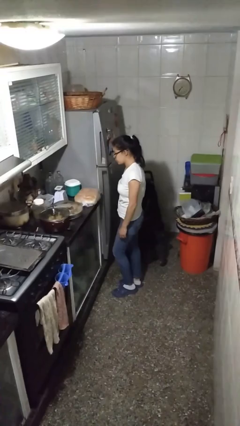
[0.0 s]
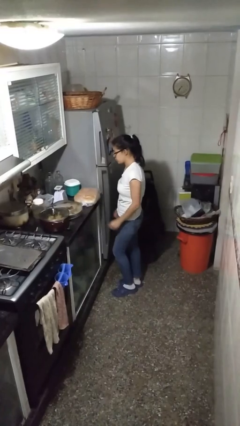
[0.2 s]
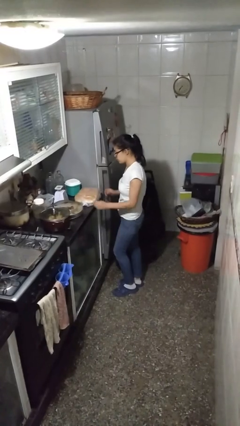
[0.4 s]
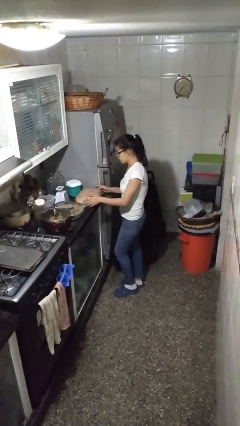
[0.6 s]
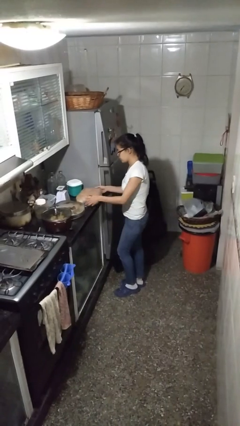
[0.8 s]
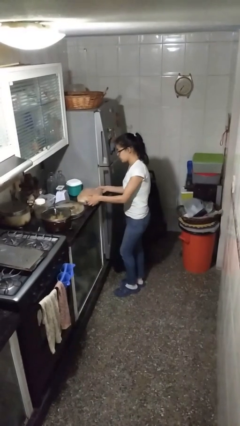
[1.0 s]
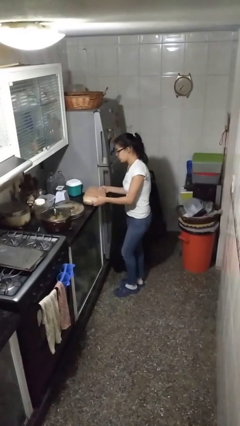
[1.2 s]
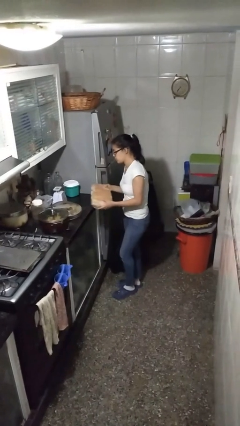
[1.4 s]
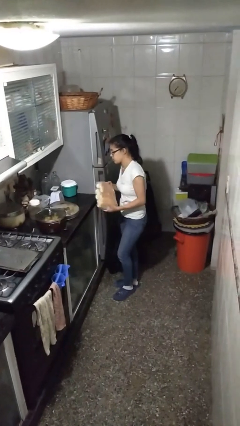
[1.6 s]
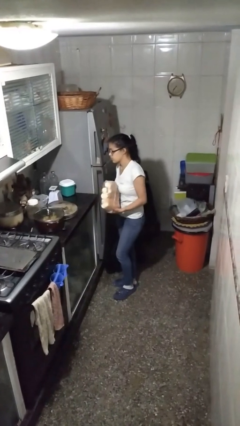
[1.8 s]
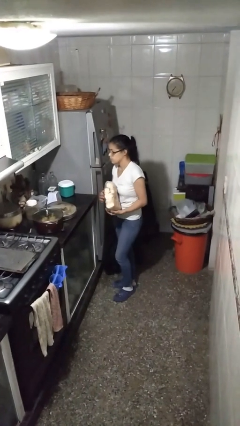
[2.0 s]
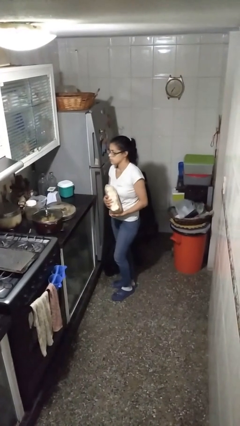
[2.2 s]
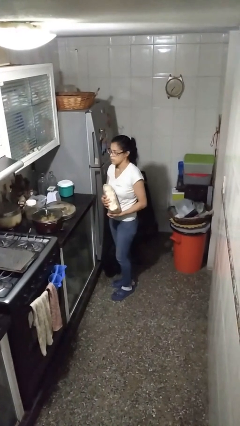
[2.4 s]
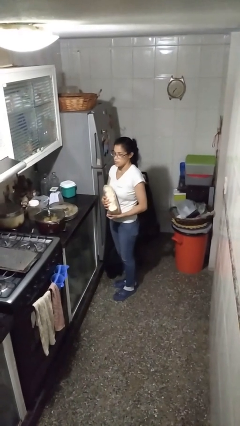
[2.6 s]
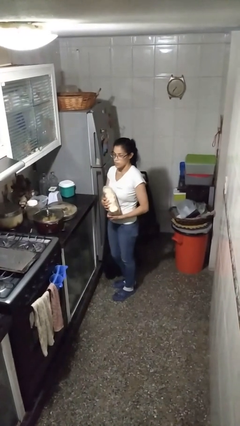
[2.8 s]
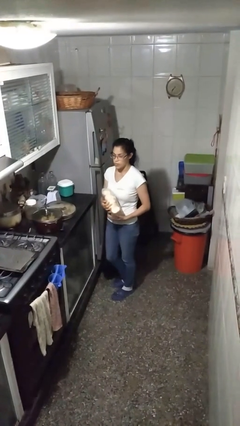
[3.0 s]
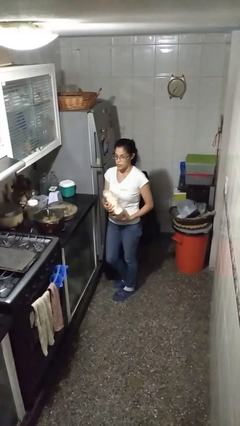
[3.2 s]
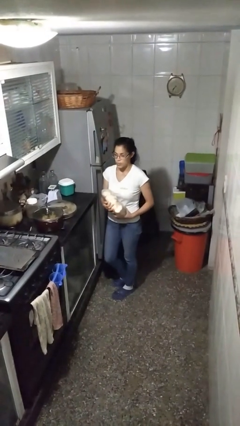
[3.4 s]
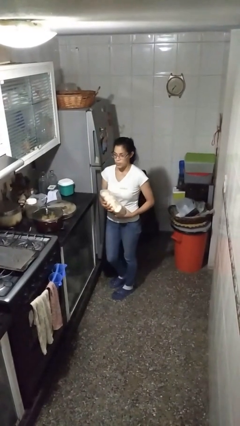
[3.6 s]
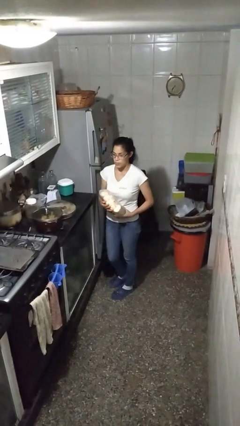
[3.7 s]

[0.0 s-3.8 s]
person picks up object from countertop

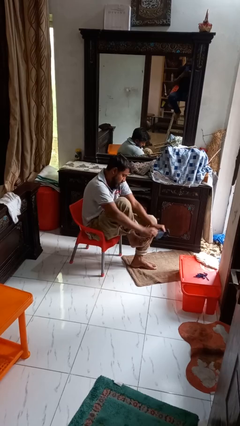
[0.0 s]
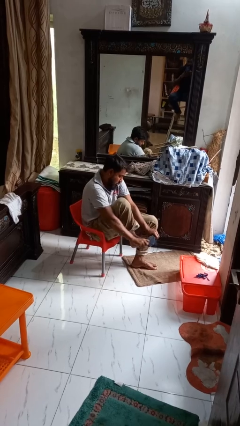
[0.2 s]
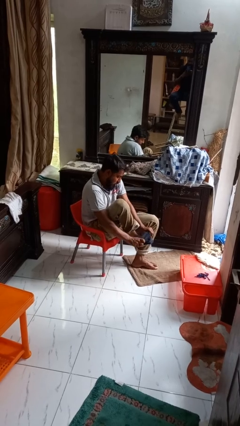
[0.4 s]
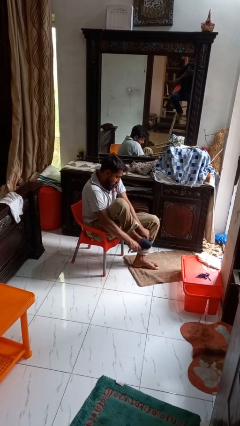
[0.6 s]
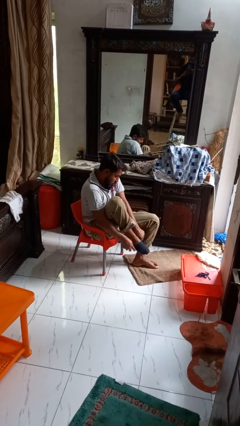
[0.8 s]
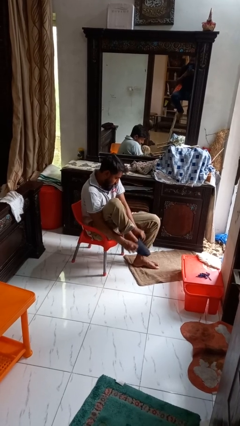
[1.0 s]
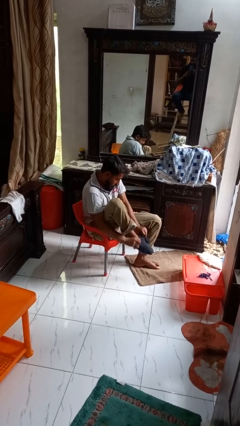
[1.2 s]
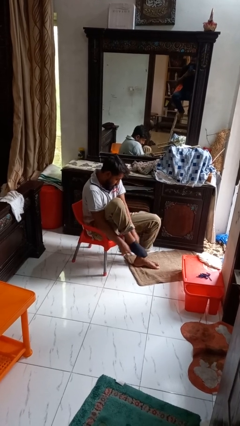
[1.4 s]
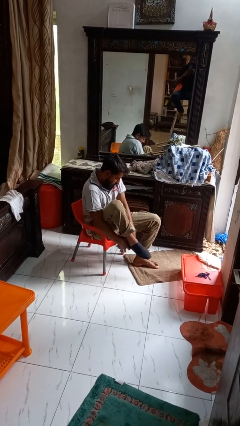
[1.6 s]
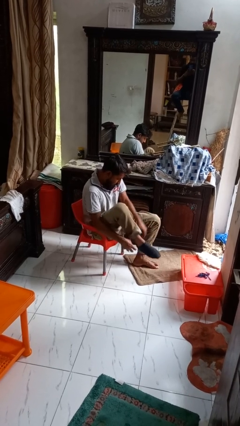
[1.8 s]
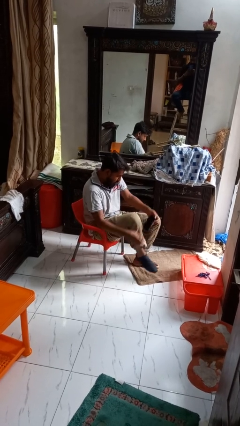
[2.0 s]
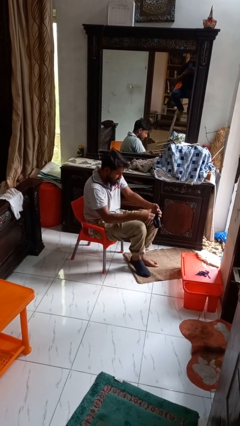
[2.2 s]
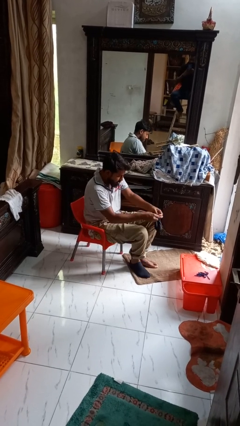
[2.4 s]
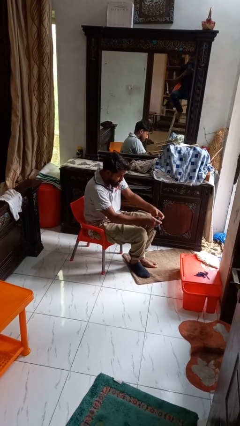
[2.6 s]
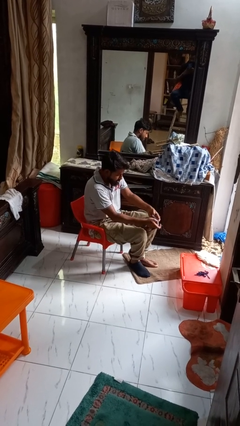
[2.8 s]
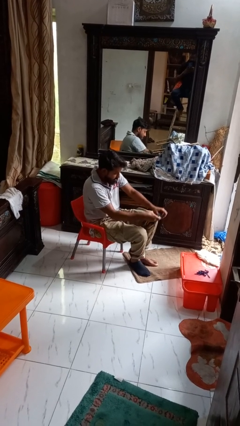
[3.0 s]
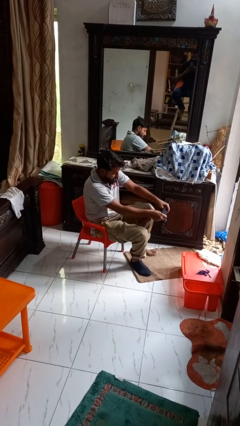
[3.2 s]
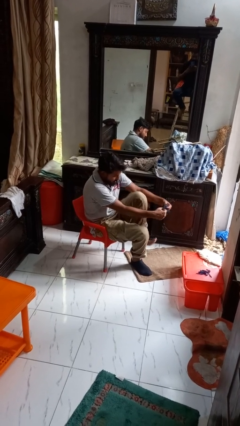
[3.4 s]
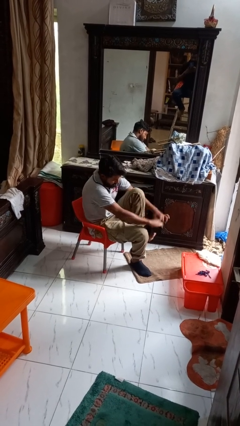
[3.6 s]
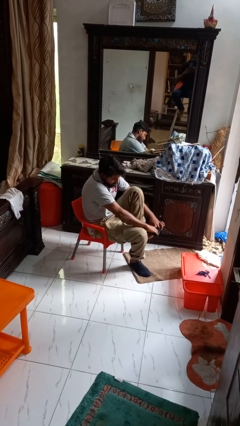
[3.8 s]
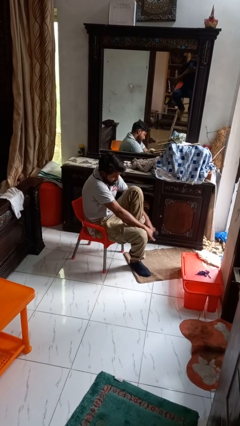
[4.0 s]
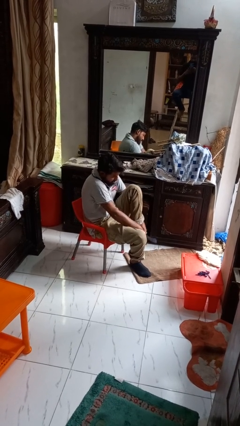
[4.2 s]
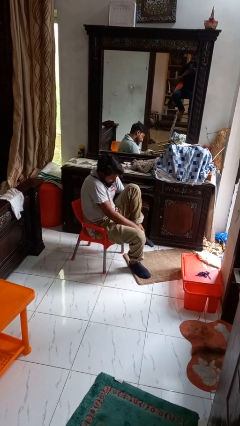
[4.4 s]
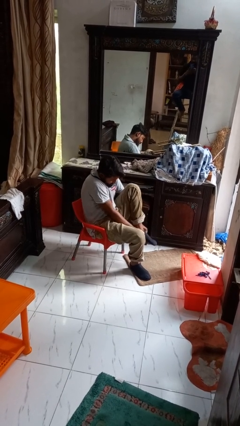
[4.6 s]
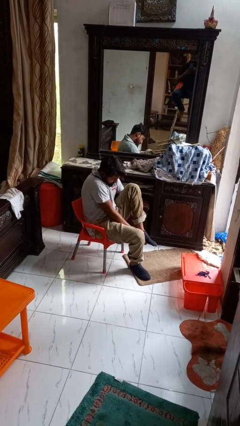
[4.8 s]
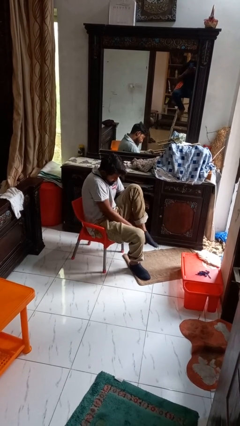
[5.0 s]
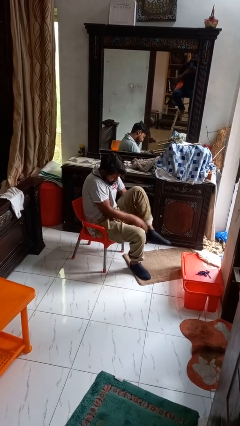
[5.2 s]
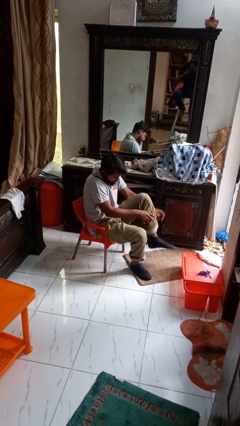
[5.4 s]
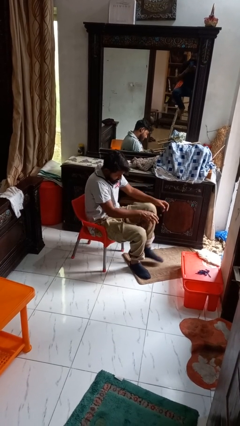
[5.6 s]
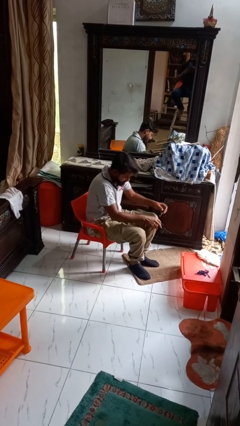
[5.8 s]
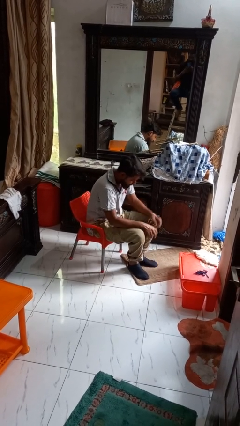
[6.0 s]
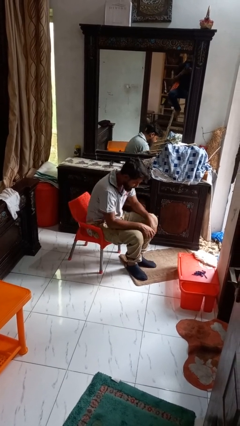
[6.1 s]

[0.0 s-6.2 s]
person puts on socks

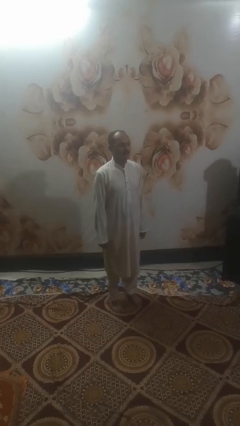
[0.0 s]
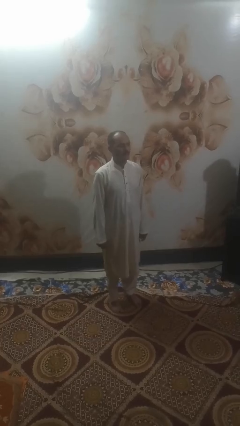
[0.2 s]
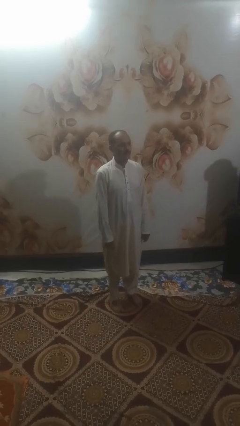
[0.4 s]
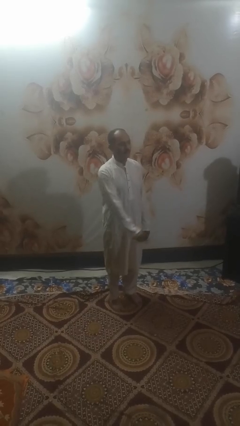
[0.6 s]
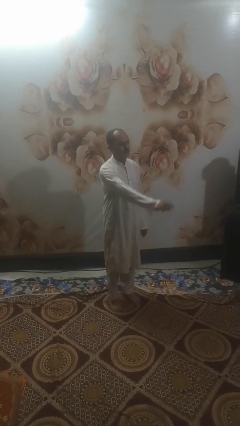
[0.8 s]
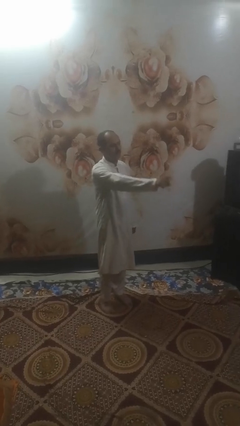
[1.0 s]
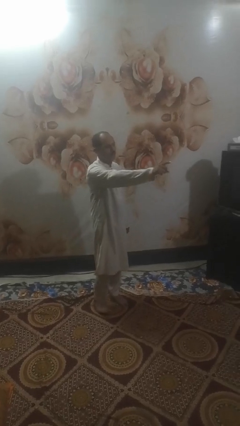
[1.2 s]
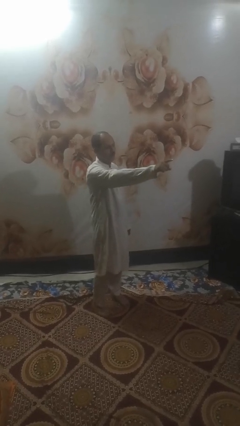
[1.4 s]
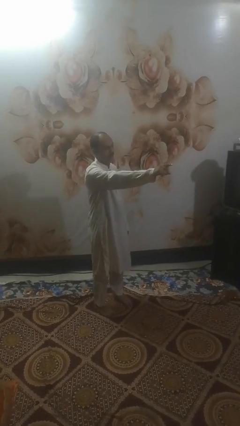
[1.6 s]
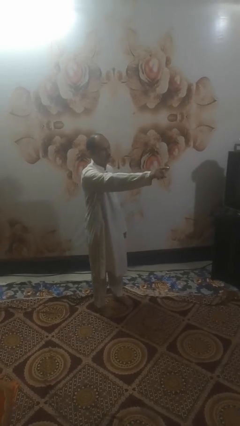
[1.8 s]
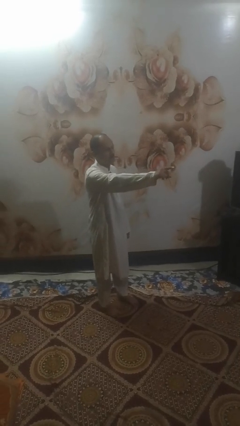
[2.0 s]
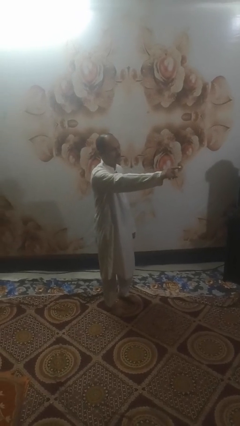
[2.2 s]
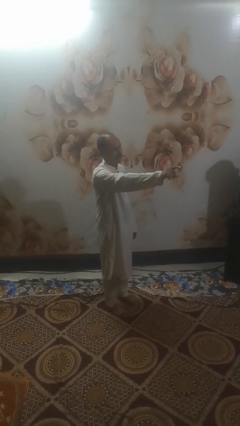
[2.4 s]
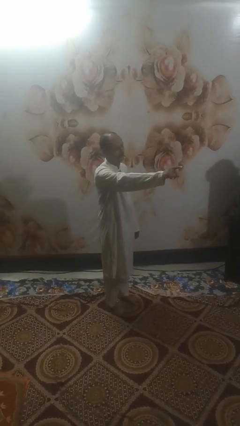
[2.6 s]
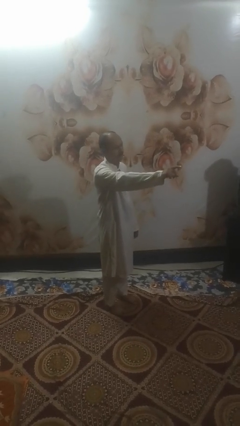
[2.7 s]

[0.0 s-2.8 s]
person points at person

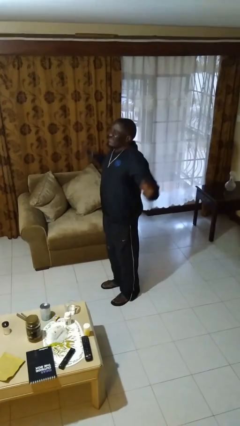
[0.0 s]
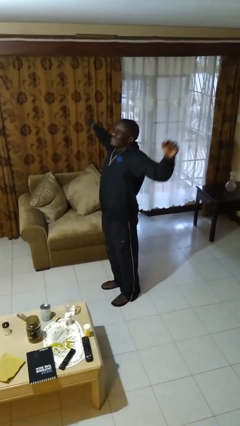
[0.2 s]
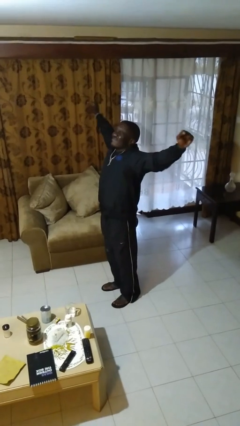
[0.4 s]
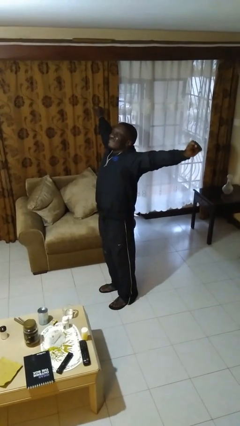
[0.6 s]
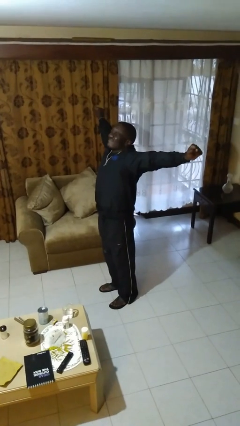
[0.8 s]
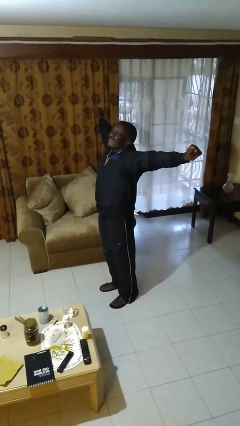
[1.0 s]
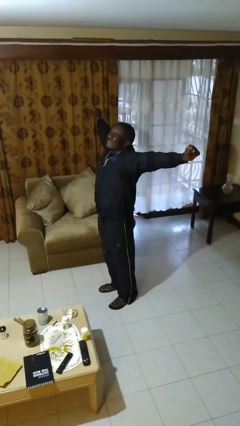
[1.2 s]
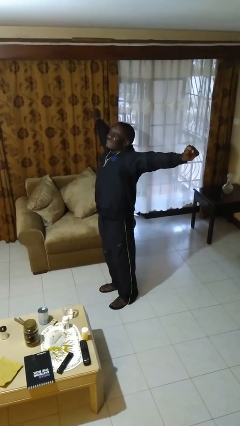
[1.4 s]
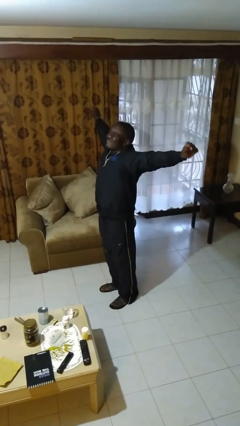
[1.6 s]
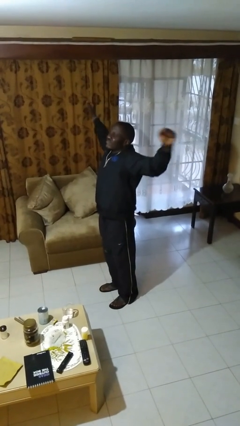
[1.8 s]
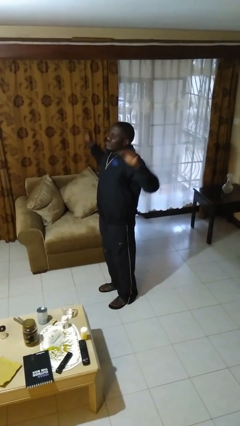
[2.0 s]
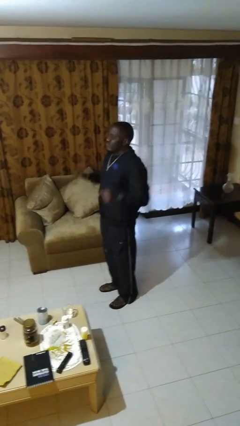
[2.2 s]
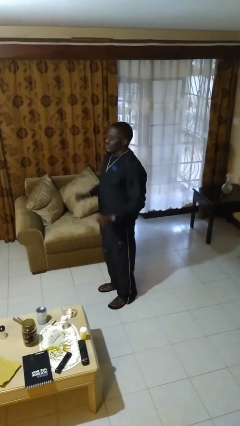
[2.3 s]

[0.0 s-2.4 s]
person stretches arms to side

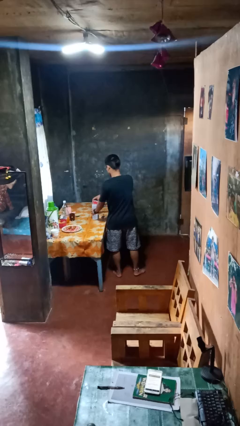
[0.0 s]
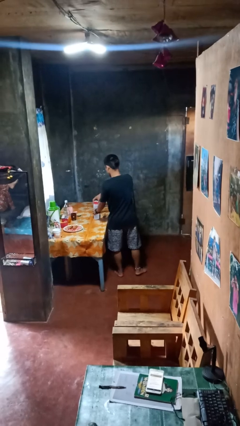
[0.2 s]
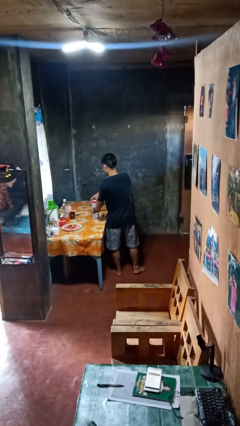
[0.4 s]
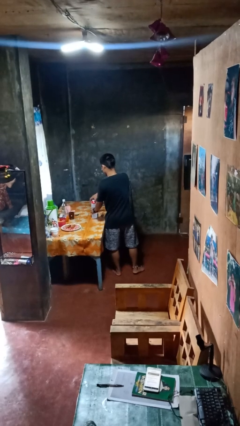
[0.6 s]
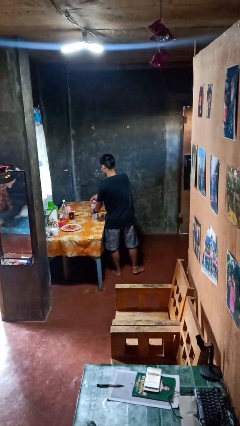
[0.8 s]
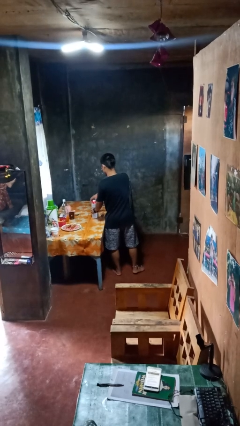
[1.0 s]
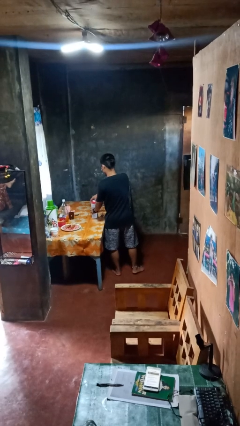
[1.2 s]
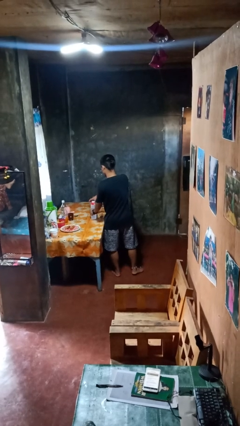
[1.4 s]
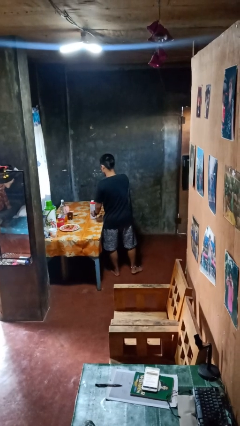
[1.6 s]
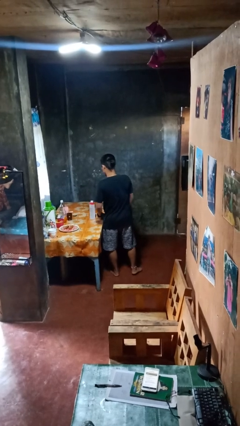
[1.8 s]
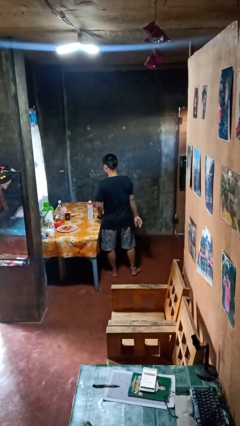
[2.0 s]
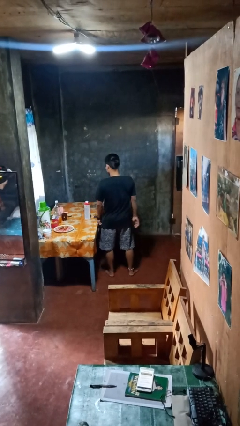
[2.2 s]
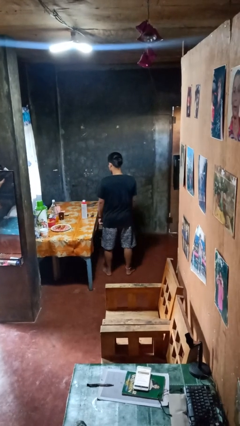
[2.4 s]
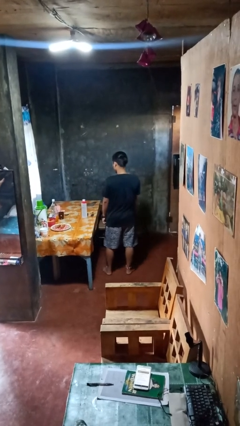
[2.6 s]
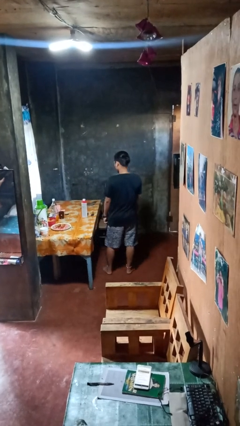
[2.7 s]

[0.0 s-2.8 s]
person closes jar
